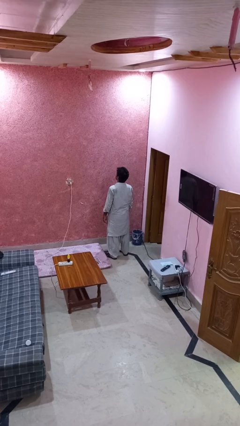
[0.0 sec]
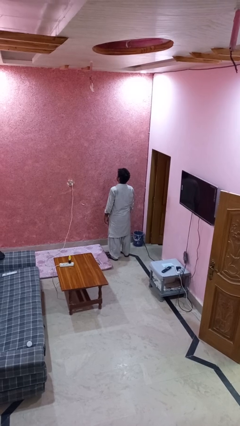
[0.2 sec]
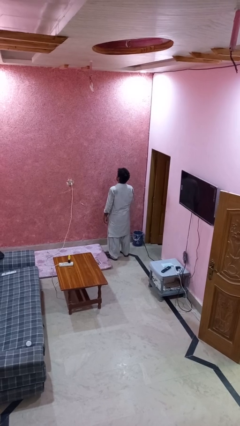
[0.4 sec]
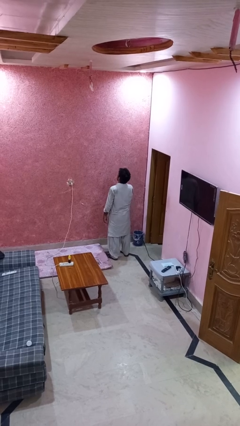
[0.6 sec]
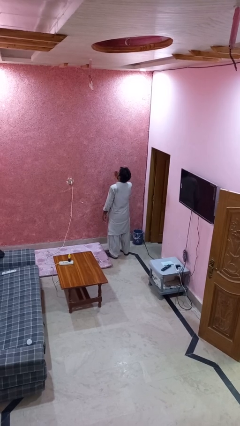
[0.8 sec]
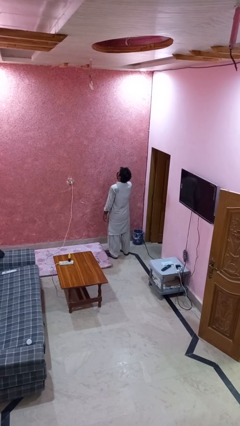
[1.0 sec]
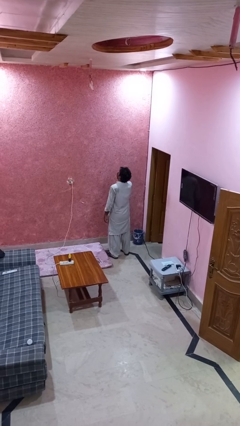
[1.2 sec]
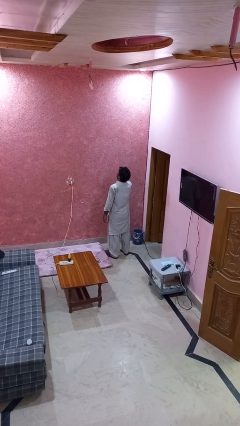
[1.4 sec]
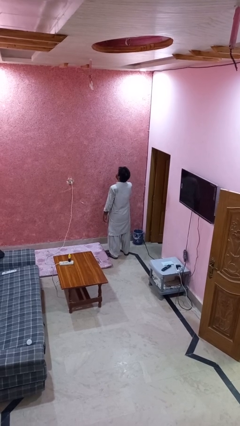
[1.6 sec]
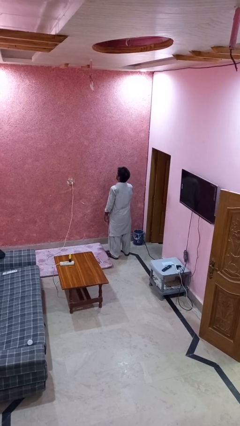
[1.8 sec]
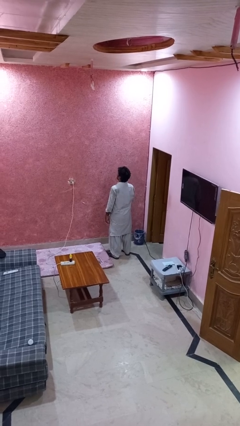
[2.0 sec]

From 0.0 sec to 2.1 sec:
person yawns

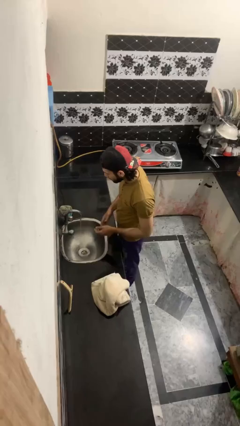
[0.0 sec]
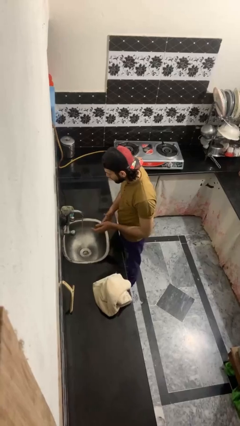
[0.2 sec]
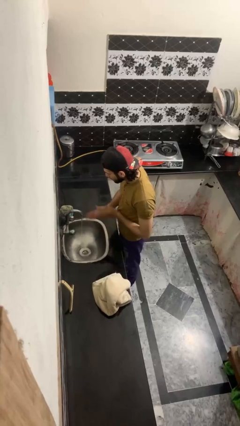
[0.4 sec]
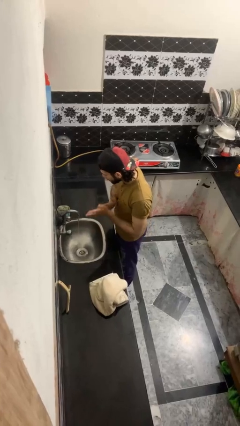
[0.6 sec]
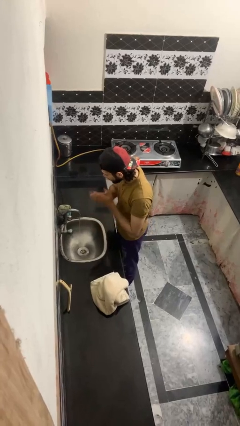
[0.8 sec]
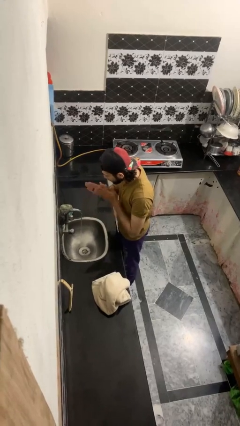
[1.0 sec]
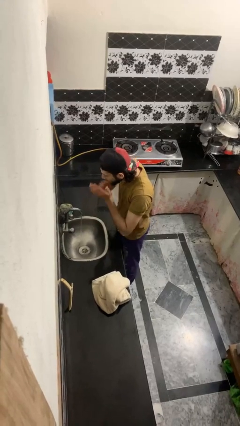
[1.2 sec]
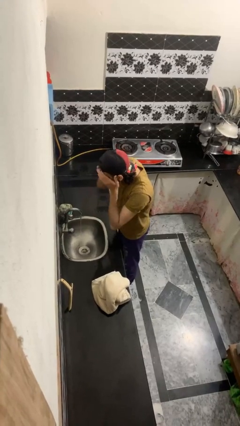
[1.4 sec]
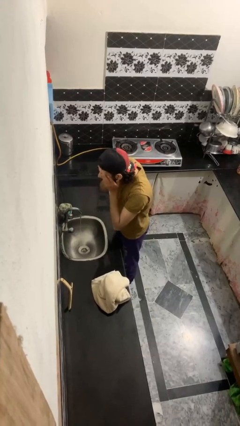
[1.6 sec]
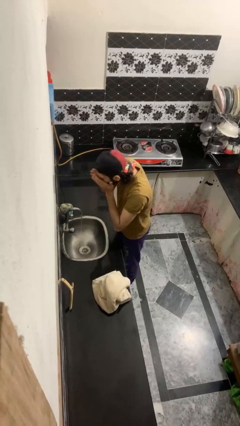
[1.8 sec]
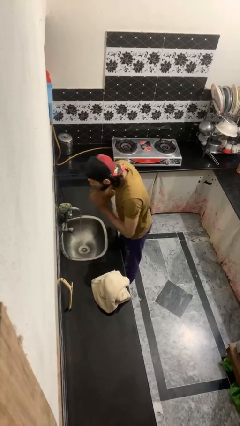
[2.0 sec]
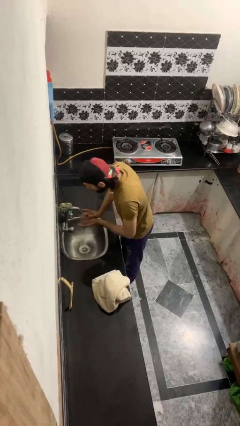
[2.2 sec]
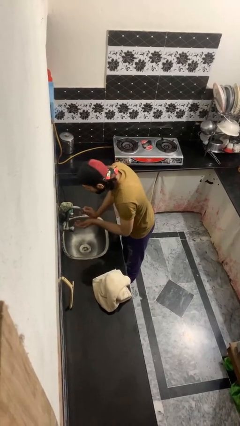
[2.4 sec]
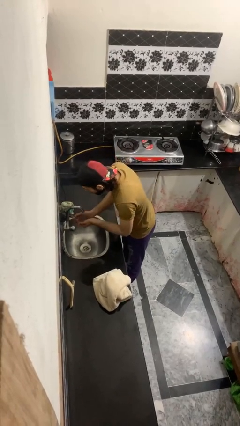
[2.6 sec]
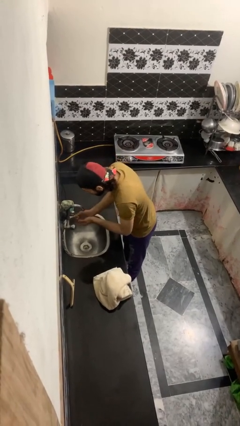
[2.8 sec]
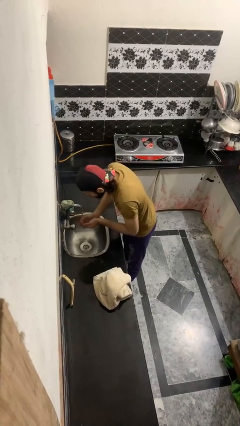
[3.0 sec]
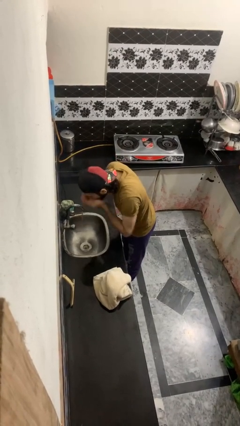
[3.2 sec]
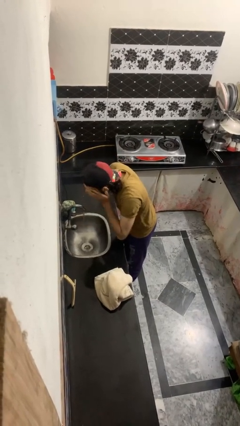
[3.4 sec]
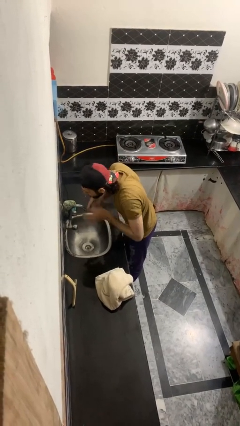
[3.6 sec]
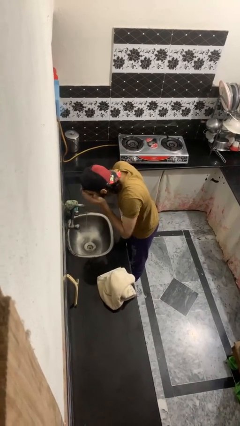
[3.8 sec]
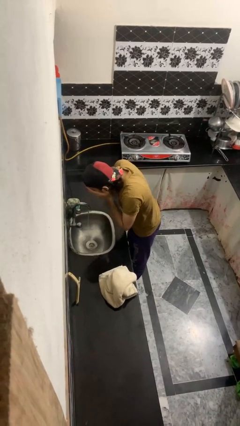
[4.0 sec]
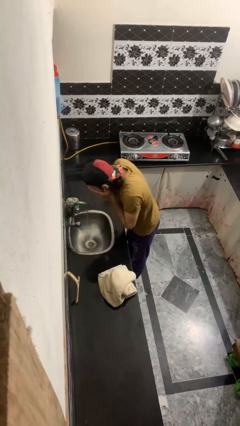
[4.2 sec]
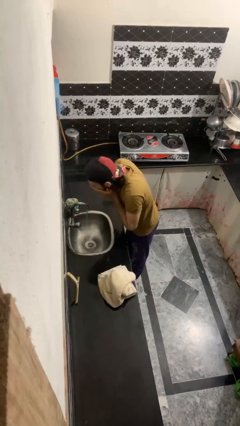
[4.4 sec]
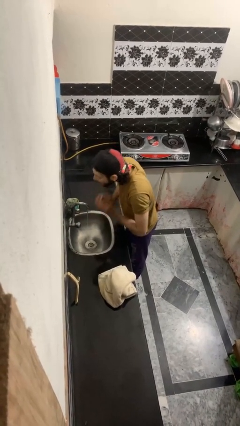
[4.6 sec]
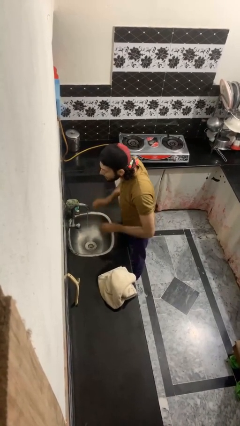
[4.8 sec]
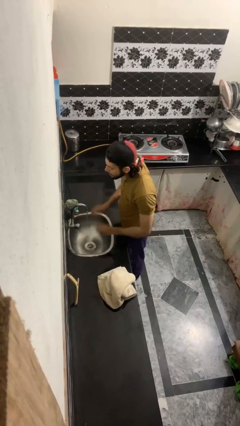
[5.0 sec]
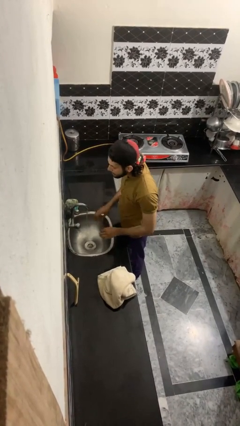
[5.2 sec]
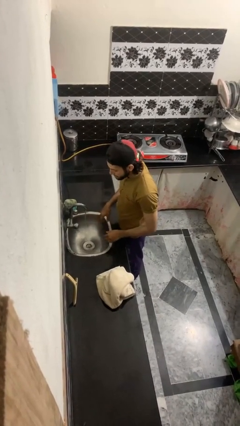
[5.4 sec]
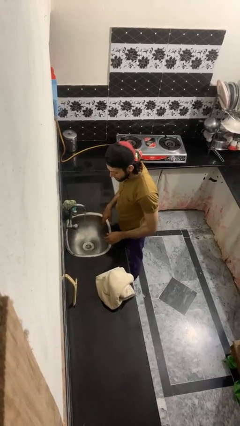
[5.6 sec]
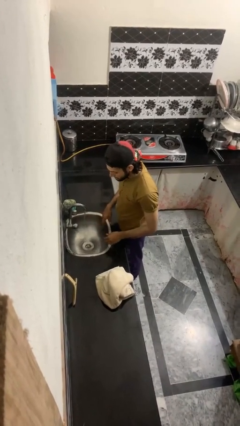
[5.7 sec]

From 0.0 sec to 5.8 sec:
person washes face

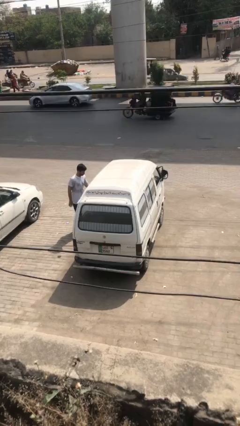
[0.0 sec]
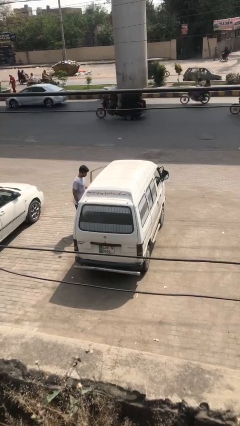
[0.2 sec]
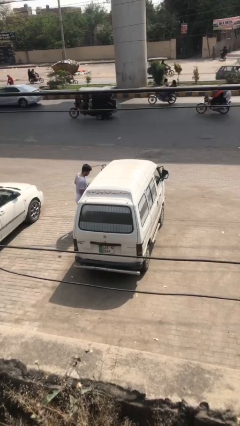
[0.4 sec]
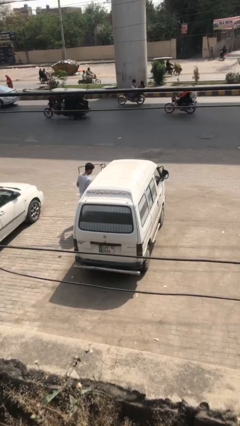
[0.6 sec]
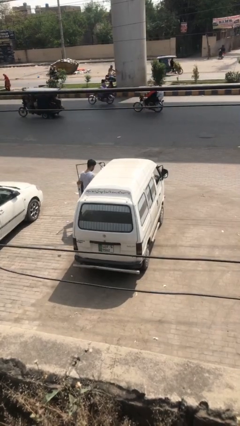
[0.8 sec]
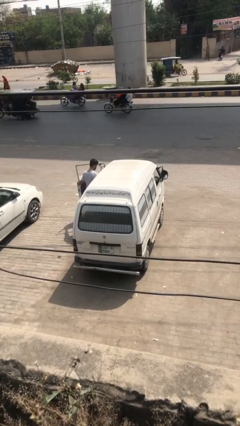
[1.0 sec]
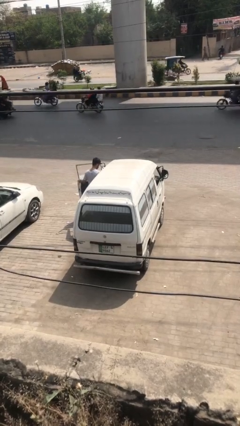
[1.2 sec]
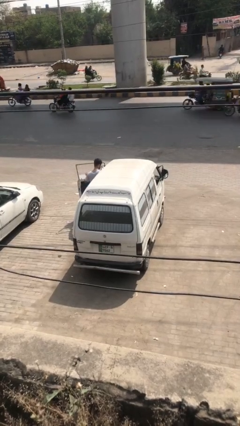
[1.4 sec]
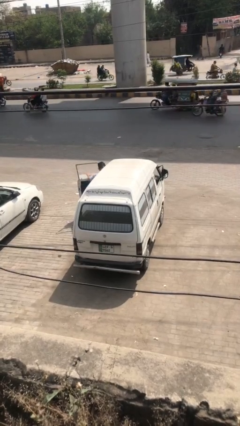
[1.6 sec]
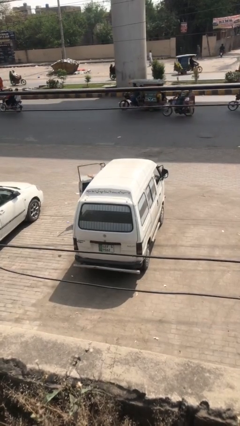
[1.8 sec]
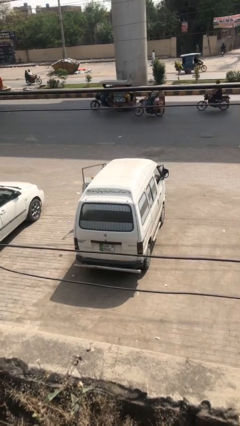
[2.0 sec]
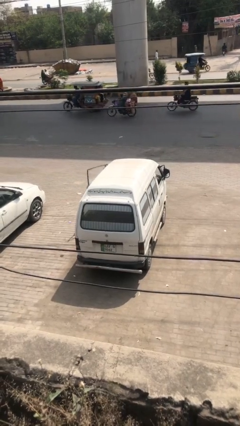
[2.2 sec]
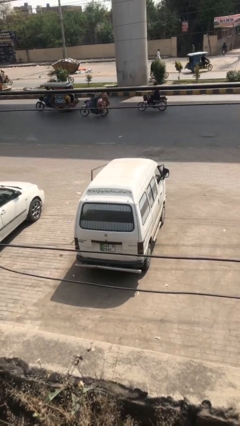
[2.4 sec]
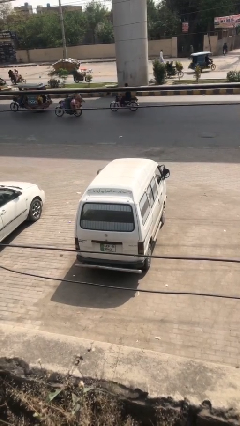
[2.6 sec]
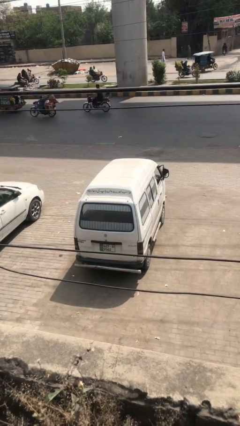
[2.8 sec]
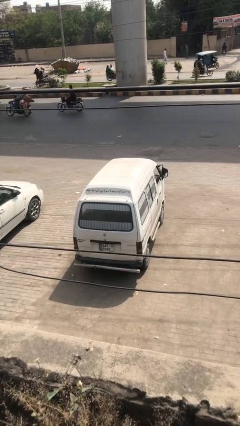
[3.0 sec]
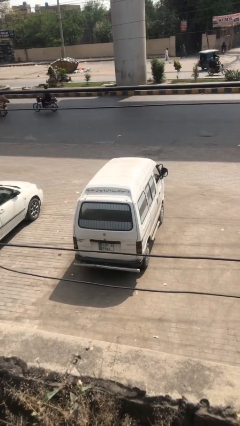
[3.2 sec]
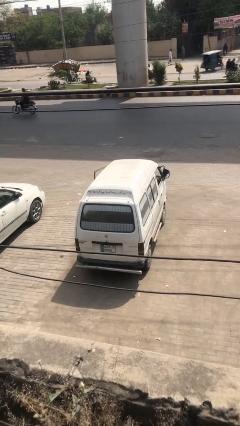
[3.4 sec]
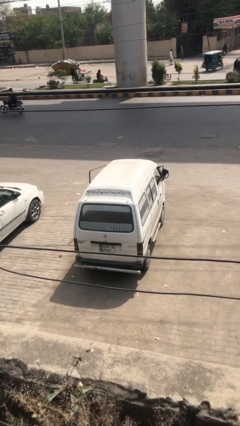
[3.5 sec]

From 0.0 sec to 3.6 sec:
car picks up person

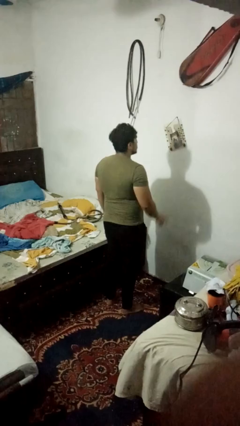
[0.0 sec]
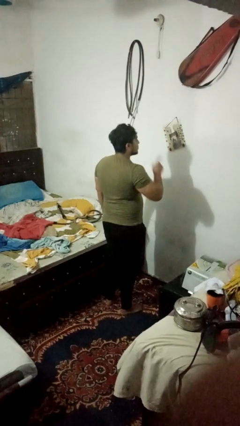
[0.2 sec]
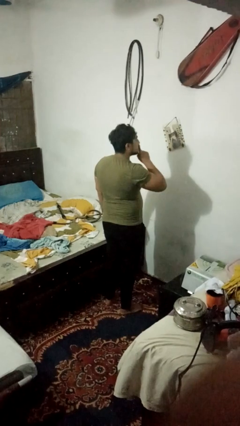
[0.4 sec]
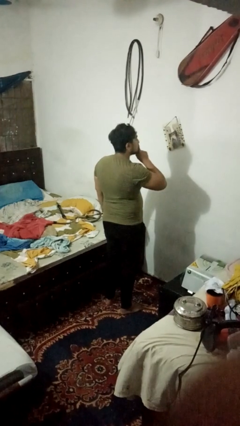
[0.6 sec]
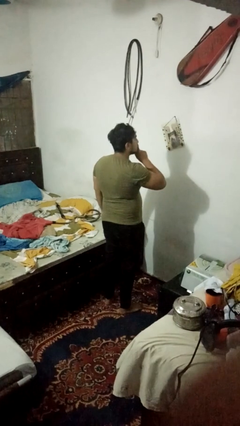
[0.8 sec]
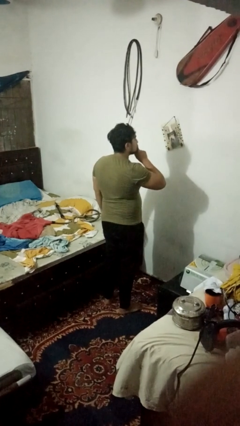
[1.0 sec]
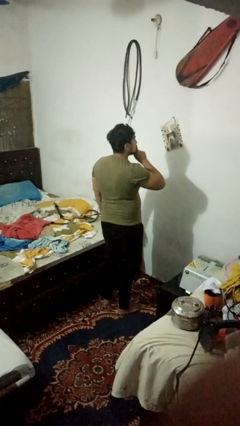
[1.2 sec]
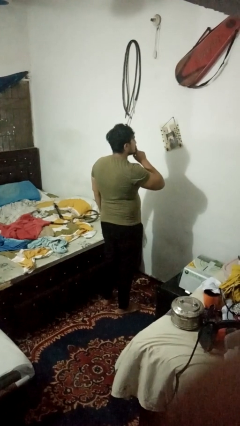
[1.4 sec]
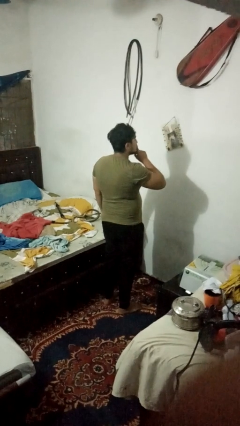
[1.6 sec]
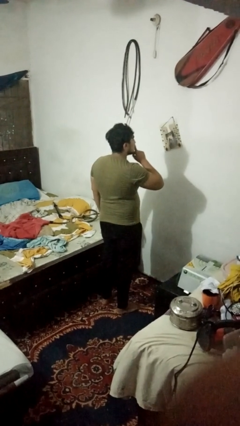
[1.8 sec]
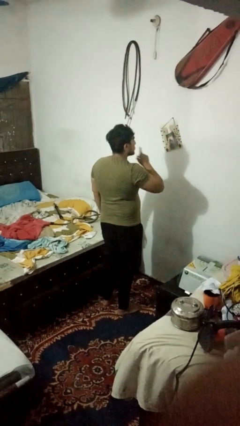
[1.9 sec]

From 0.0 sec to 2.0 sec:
person gestures be quiet

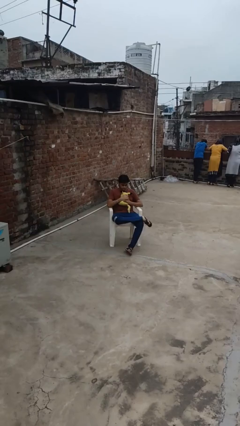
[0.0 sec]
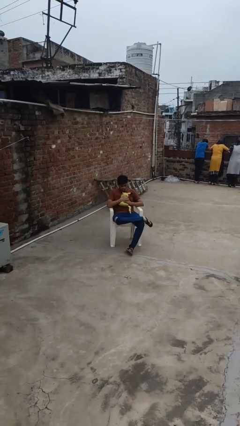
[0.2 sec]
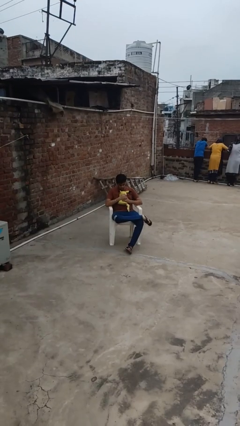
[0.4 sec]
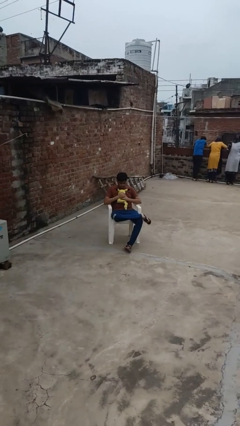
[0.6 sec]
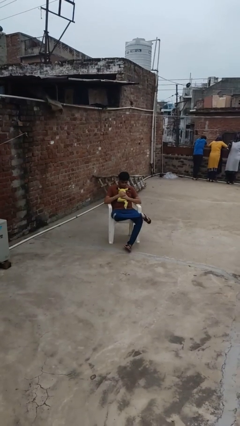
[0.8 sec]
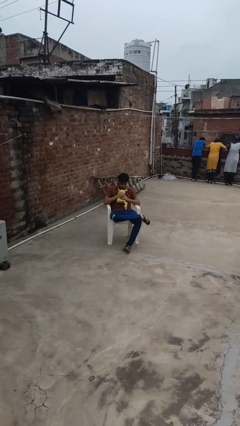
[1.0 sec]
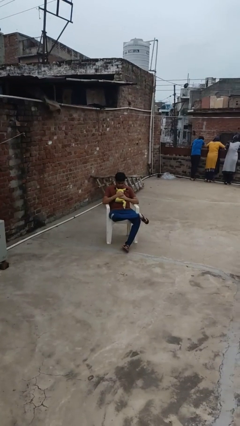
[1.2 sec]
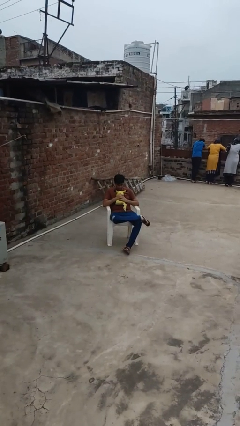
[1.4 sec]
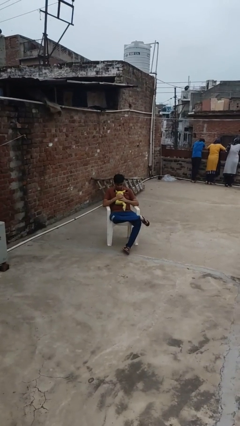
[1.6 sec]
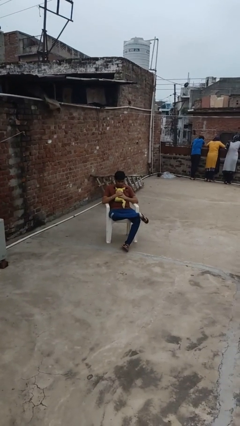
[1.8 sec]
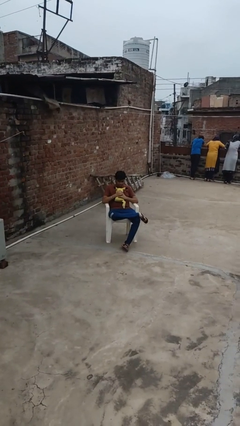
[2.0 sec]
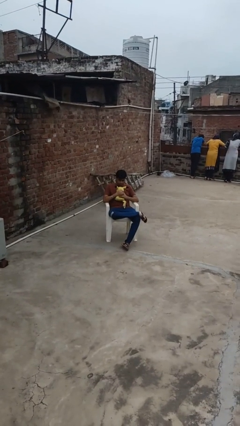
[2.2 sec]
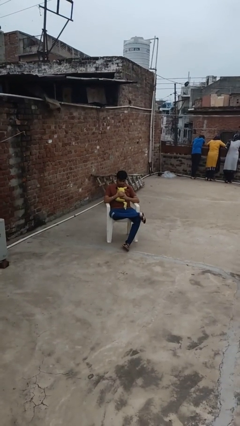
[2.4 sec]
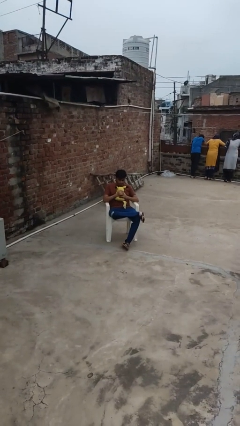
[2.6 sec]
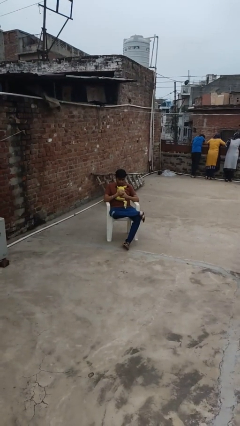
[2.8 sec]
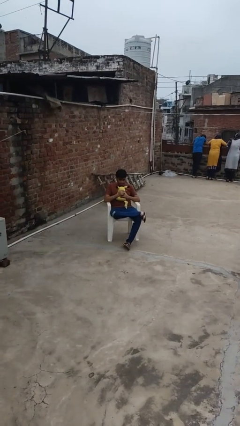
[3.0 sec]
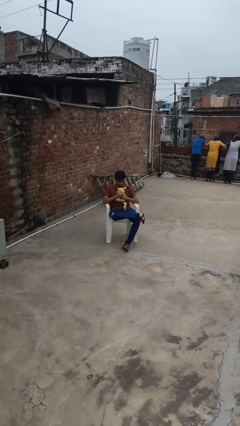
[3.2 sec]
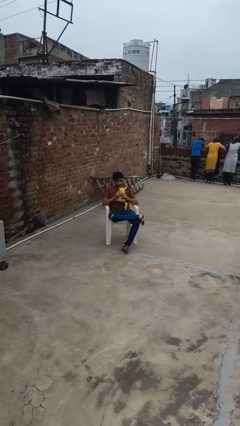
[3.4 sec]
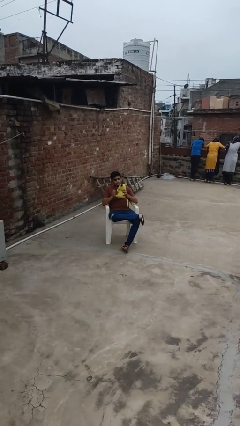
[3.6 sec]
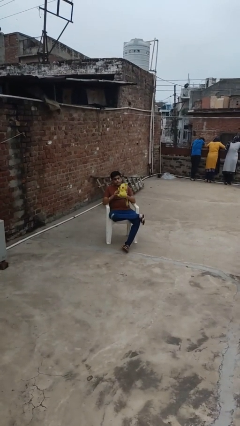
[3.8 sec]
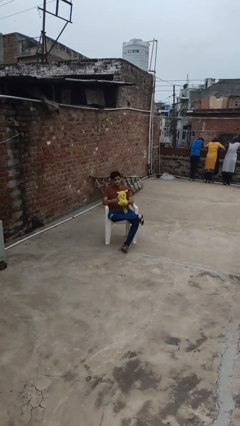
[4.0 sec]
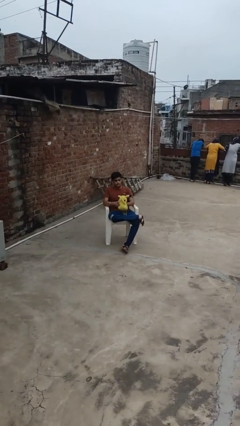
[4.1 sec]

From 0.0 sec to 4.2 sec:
person hugs stuffed animal
